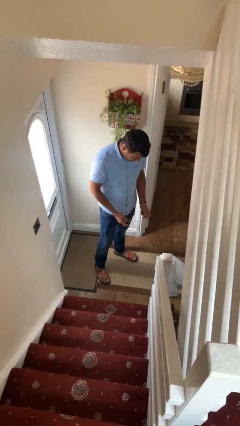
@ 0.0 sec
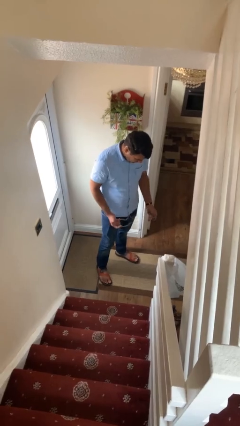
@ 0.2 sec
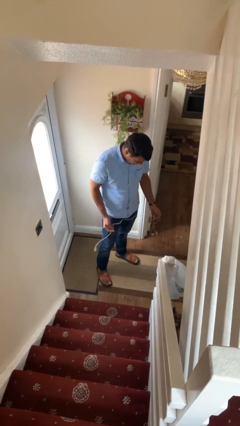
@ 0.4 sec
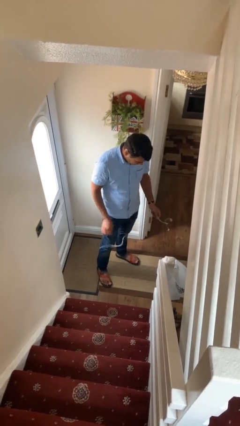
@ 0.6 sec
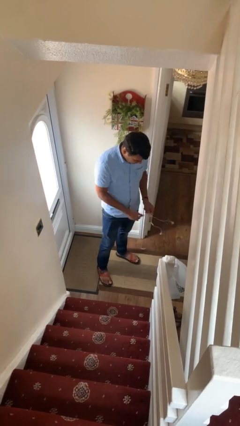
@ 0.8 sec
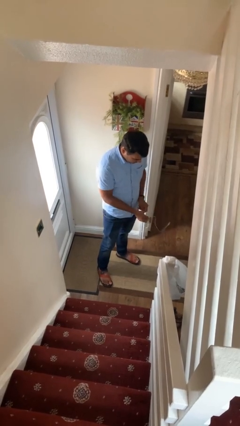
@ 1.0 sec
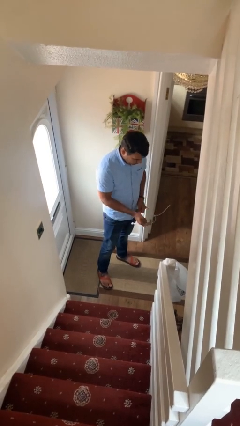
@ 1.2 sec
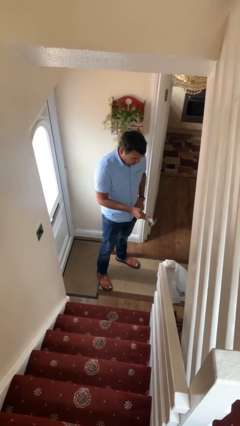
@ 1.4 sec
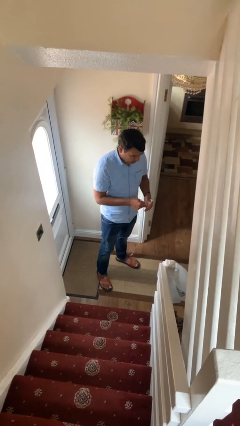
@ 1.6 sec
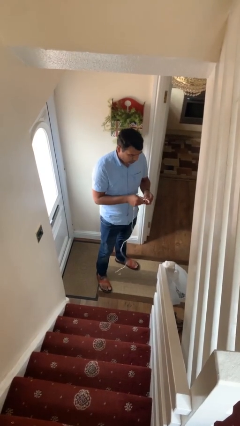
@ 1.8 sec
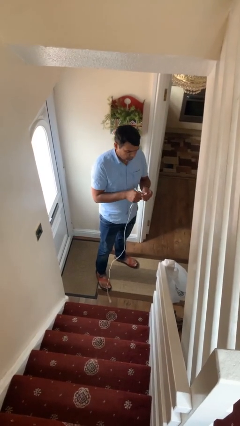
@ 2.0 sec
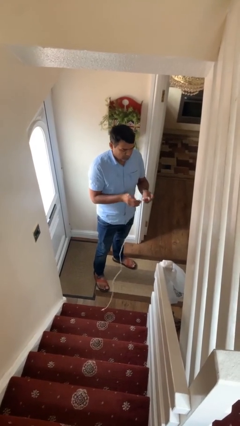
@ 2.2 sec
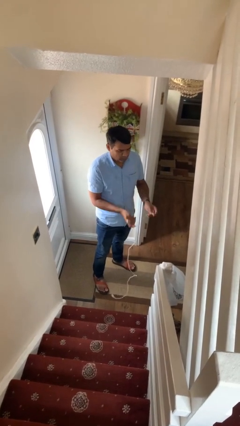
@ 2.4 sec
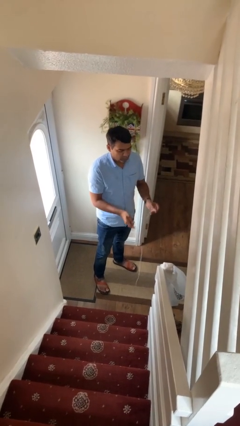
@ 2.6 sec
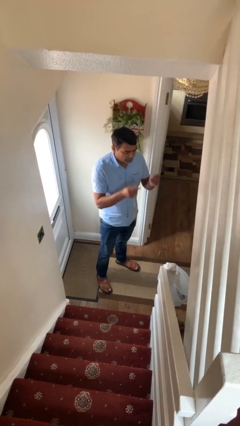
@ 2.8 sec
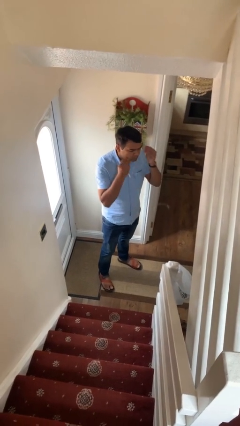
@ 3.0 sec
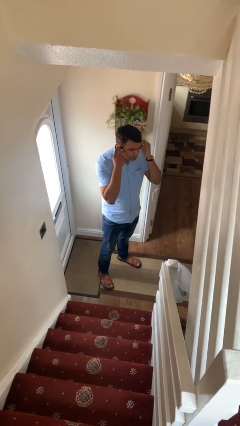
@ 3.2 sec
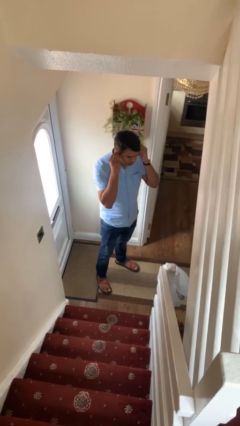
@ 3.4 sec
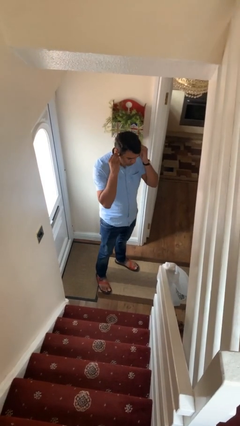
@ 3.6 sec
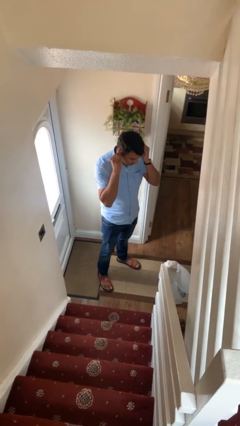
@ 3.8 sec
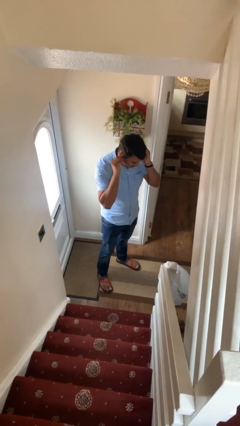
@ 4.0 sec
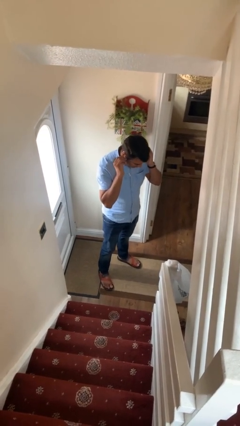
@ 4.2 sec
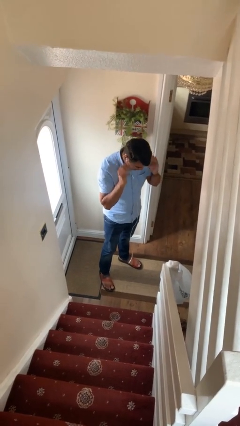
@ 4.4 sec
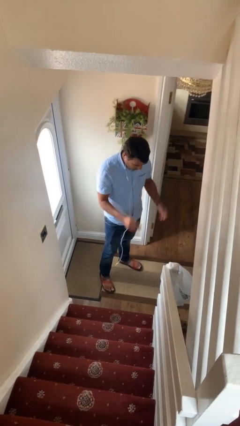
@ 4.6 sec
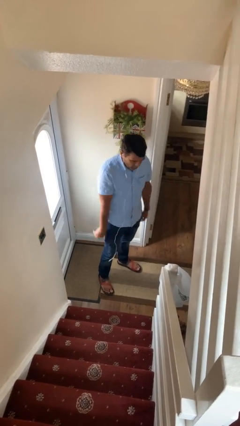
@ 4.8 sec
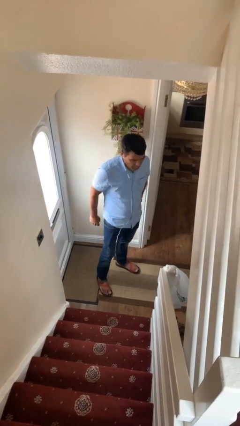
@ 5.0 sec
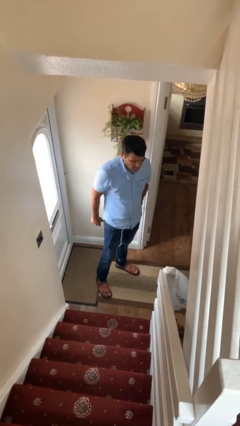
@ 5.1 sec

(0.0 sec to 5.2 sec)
person puts on headphones

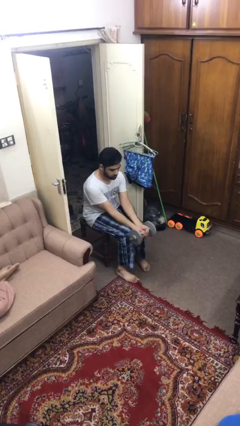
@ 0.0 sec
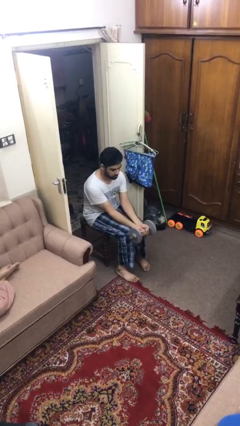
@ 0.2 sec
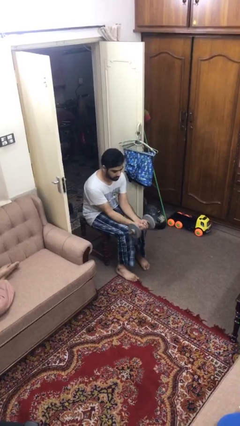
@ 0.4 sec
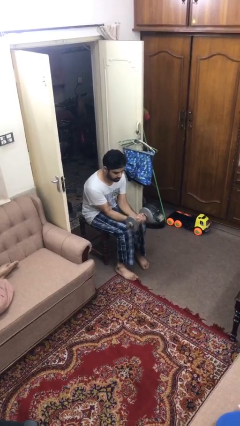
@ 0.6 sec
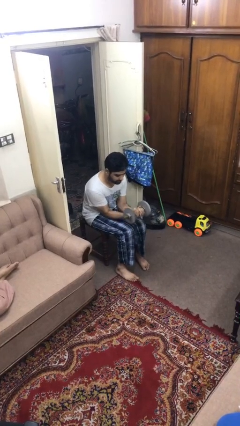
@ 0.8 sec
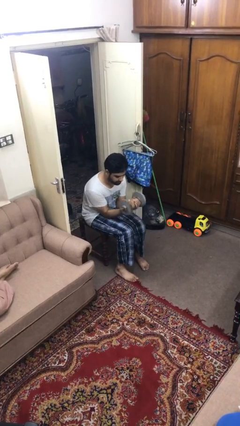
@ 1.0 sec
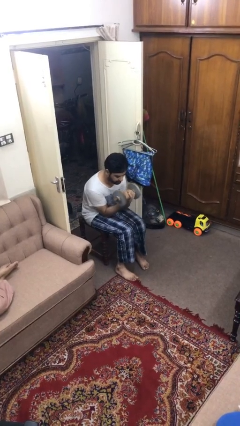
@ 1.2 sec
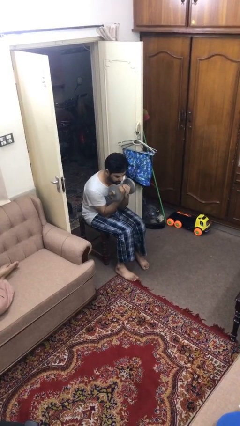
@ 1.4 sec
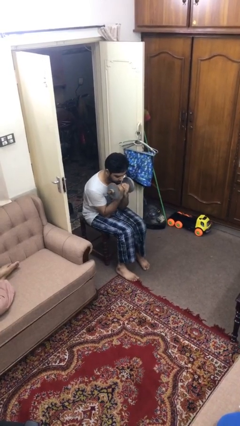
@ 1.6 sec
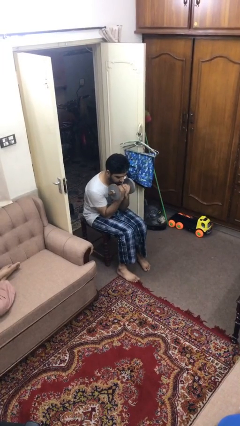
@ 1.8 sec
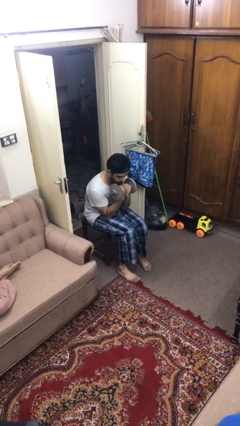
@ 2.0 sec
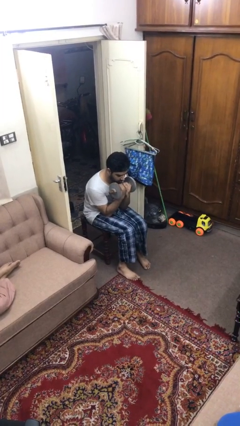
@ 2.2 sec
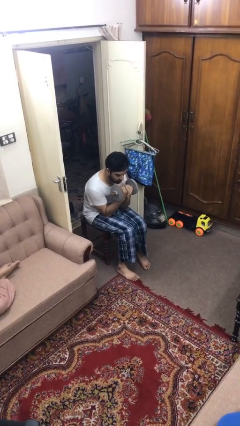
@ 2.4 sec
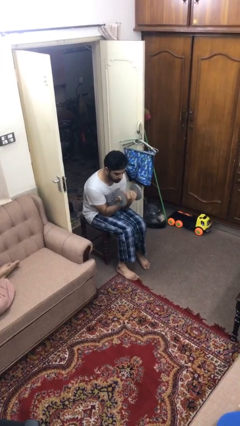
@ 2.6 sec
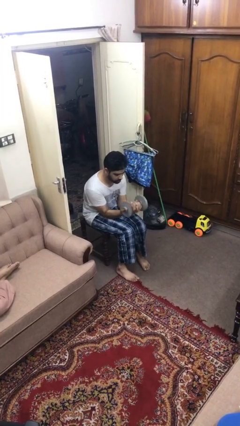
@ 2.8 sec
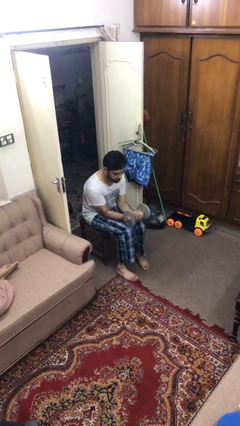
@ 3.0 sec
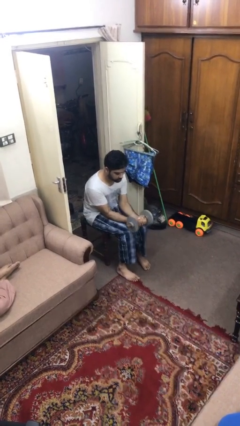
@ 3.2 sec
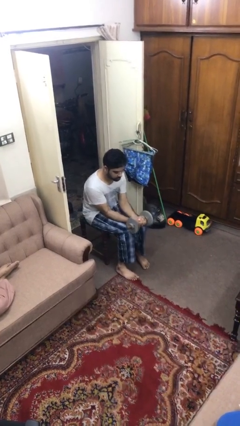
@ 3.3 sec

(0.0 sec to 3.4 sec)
person lifts dumbbells

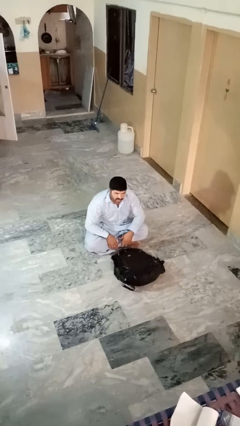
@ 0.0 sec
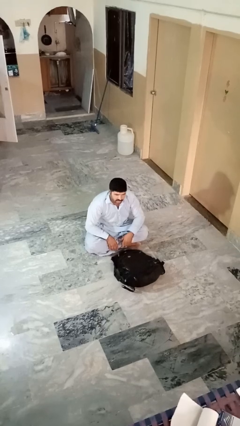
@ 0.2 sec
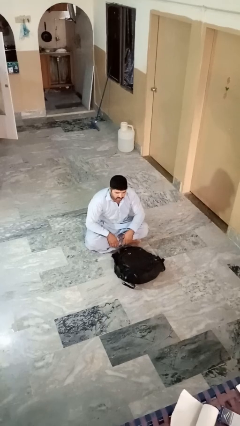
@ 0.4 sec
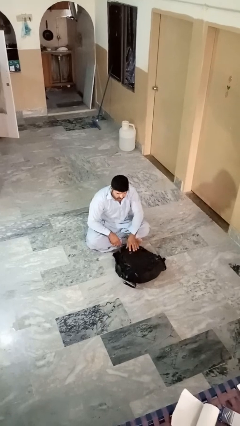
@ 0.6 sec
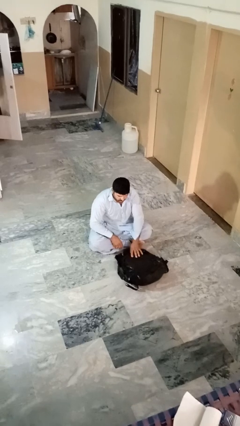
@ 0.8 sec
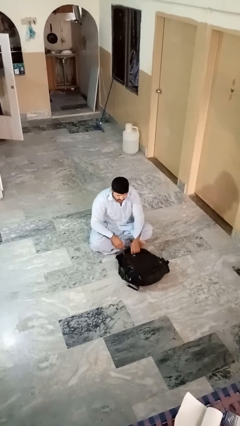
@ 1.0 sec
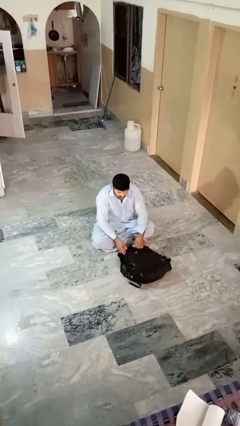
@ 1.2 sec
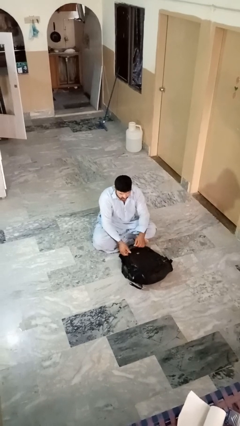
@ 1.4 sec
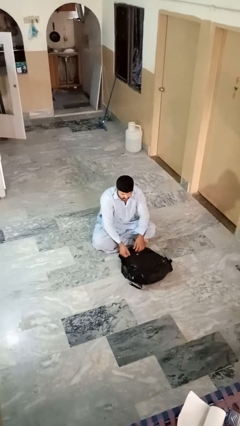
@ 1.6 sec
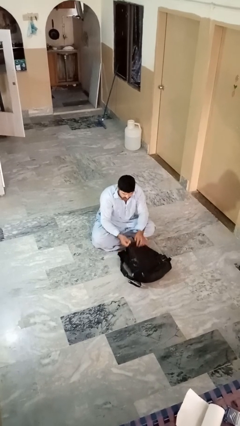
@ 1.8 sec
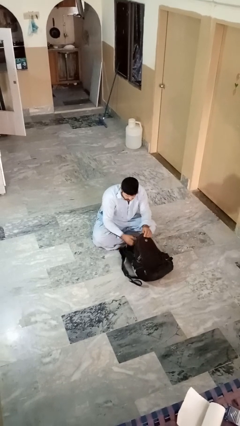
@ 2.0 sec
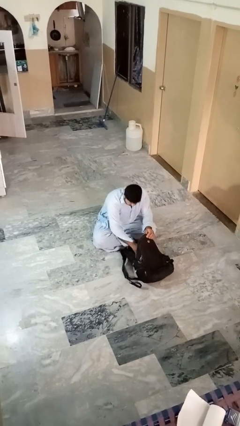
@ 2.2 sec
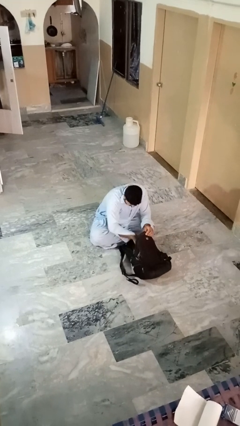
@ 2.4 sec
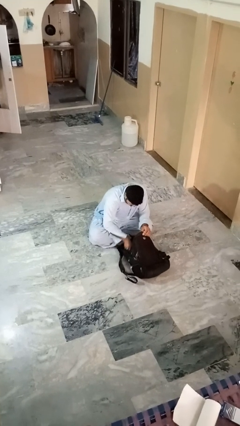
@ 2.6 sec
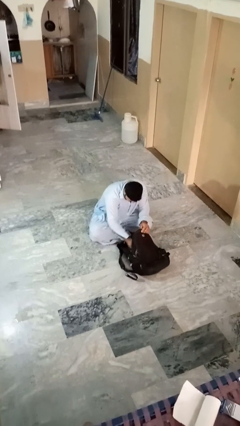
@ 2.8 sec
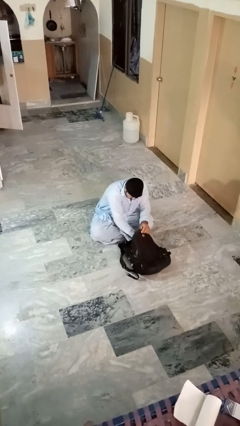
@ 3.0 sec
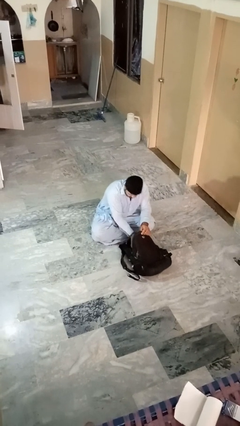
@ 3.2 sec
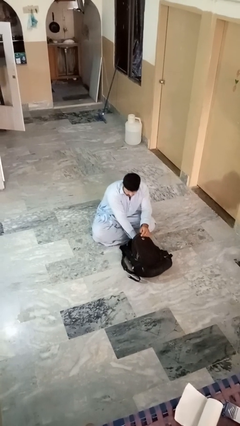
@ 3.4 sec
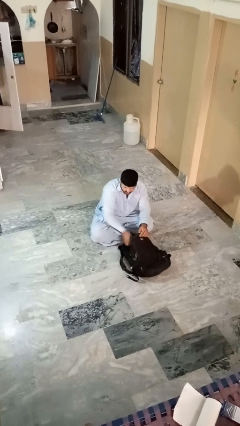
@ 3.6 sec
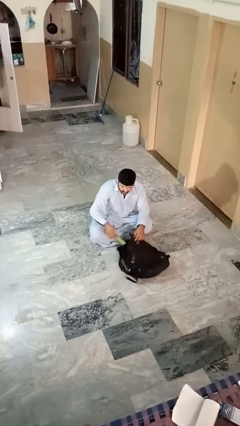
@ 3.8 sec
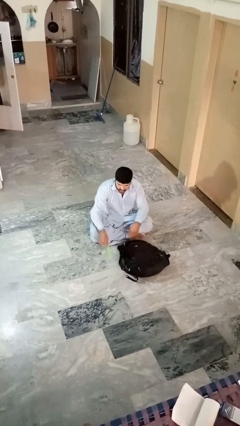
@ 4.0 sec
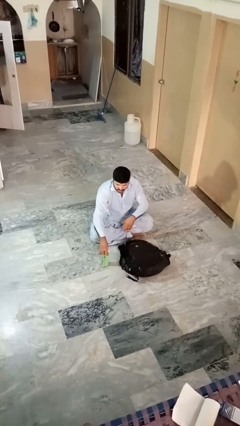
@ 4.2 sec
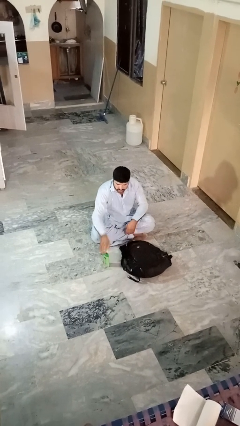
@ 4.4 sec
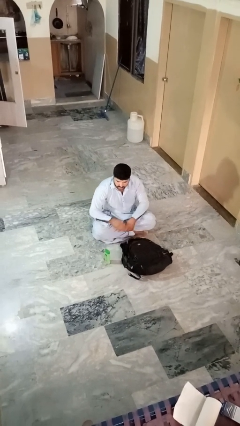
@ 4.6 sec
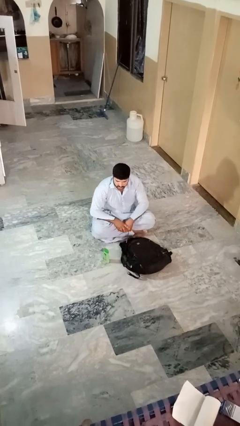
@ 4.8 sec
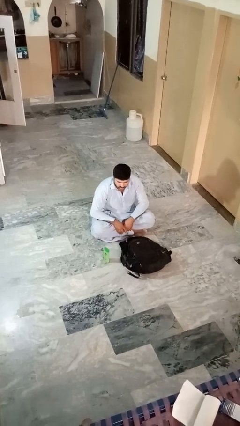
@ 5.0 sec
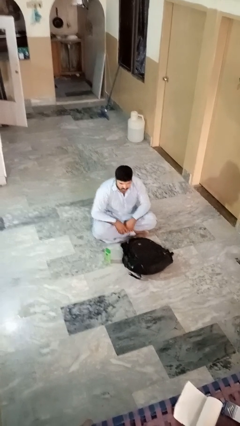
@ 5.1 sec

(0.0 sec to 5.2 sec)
person takes object from bag

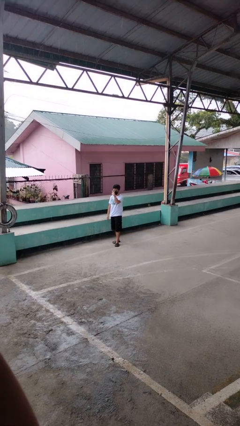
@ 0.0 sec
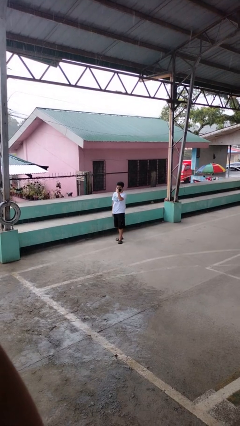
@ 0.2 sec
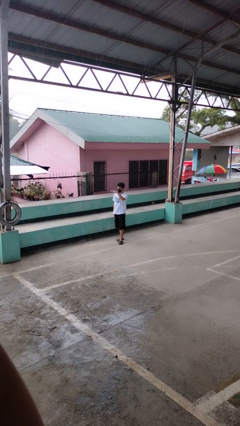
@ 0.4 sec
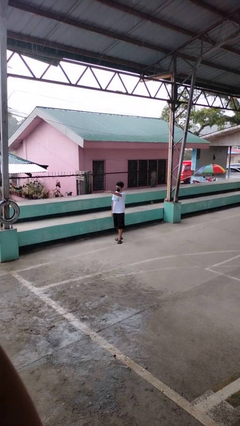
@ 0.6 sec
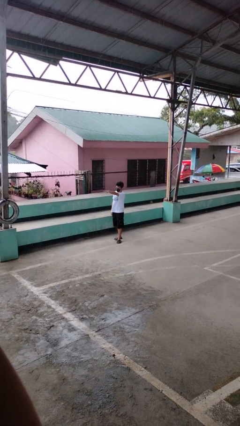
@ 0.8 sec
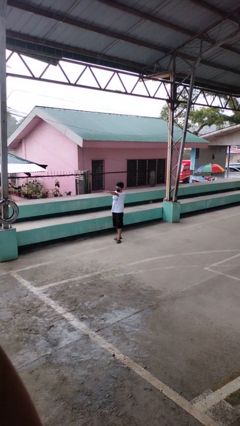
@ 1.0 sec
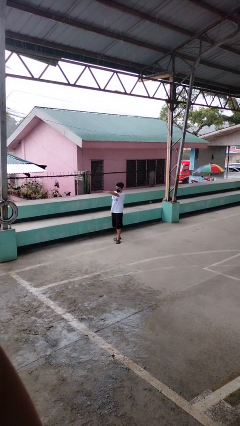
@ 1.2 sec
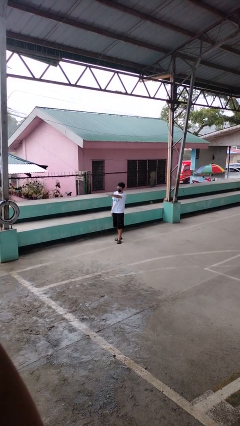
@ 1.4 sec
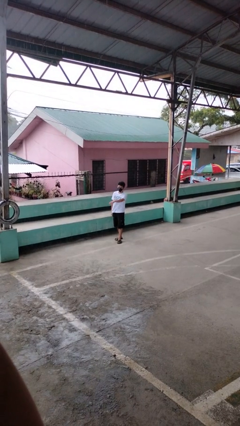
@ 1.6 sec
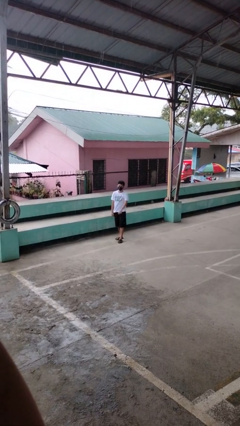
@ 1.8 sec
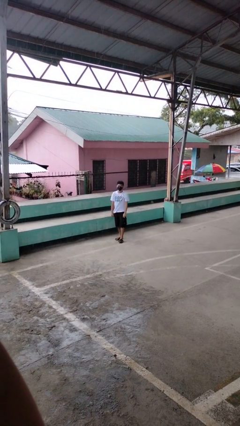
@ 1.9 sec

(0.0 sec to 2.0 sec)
person gestures watch closely

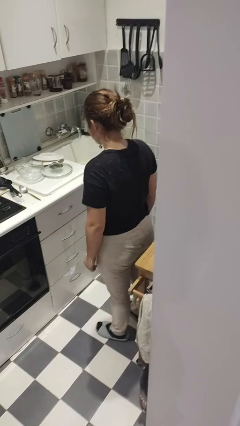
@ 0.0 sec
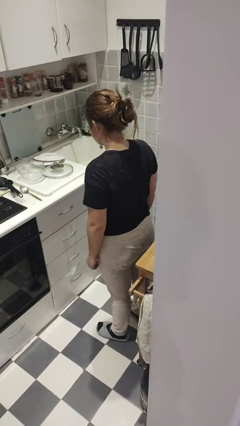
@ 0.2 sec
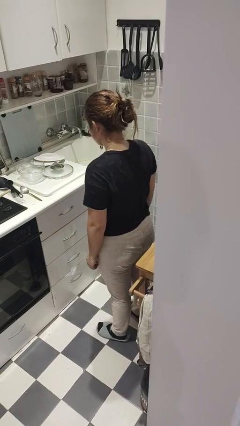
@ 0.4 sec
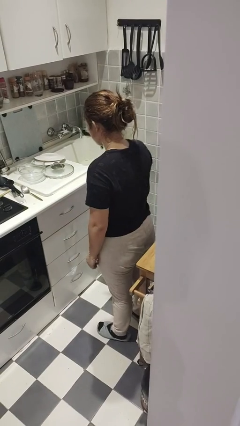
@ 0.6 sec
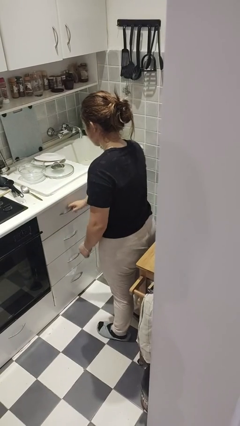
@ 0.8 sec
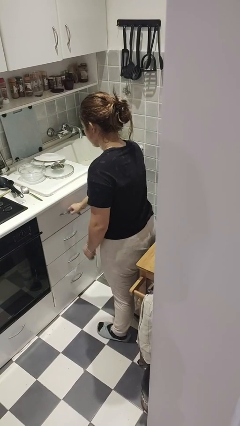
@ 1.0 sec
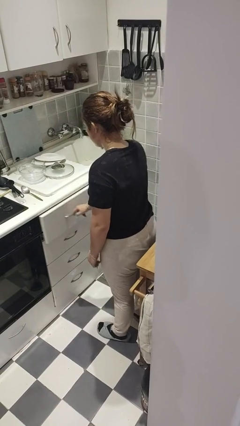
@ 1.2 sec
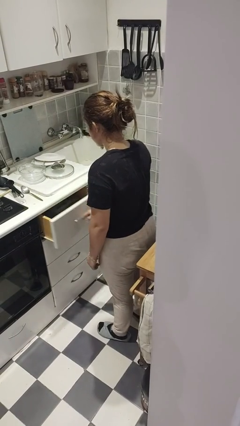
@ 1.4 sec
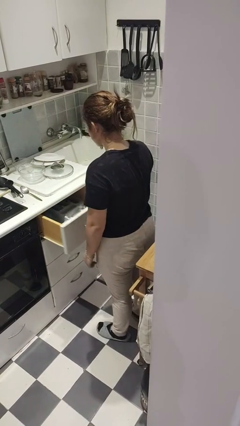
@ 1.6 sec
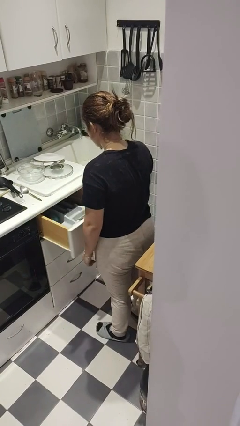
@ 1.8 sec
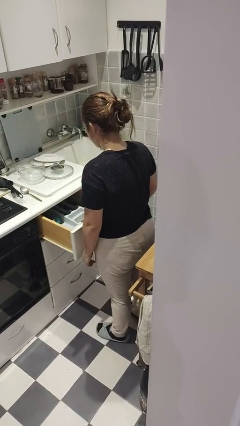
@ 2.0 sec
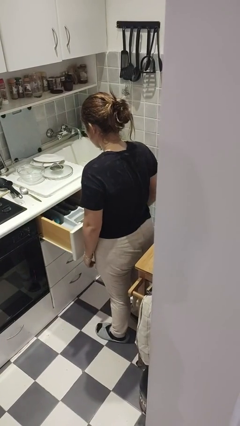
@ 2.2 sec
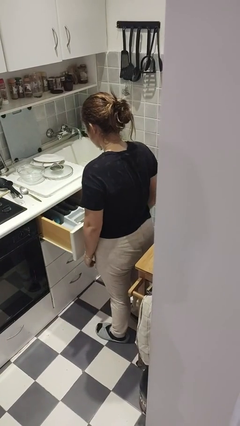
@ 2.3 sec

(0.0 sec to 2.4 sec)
person opens kitchen drawer
